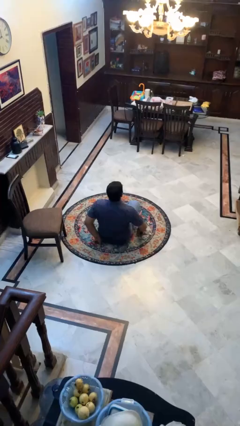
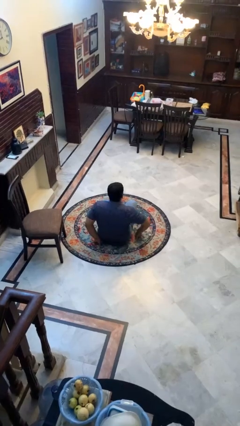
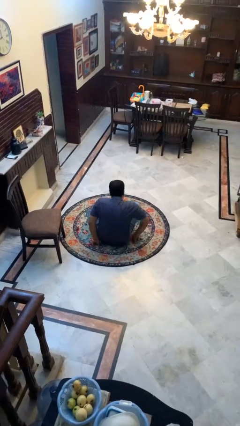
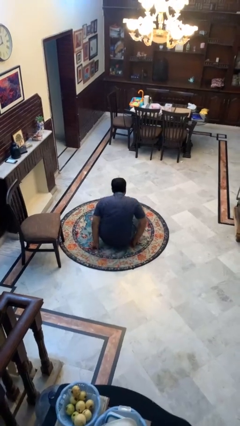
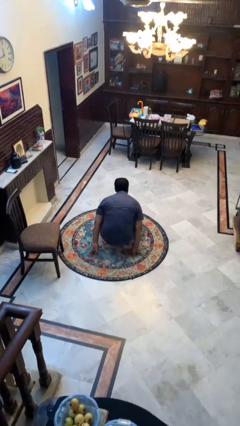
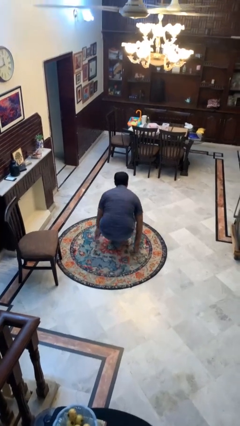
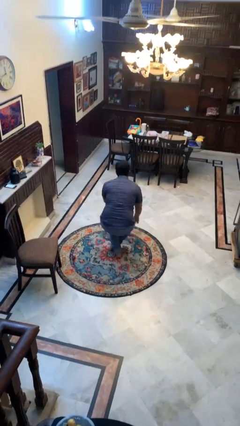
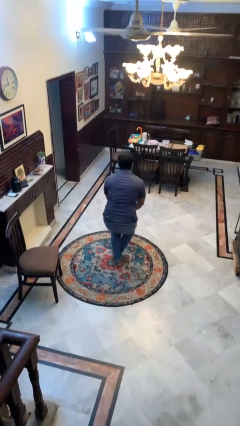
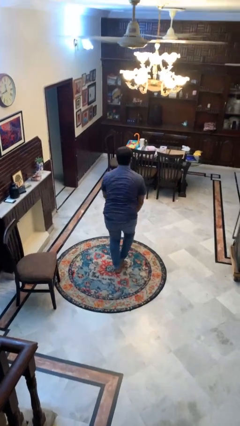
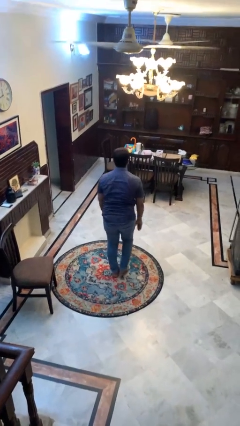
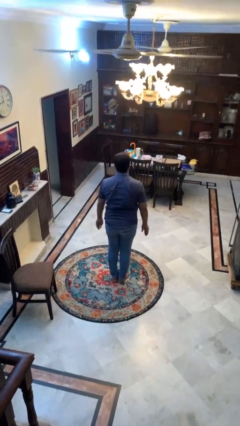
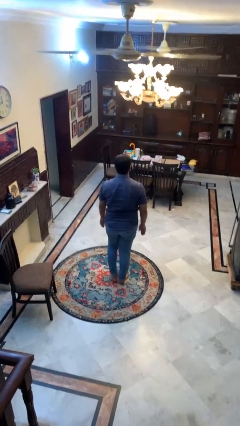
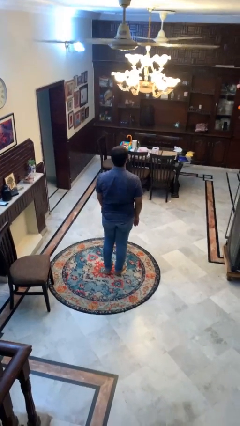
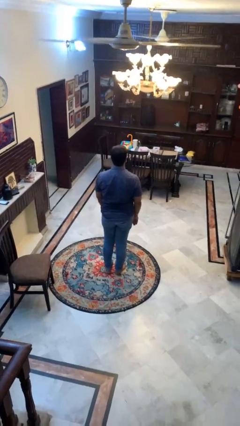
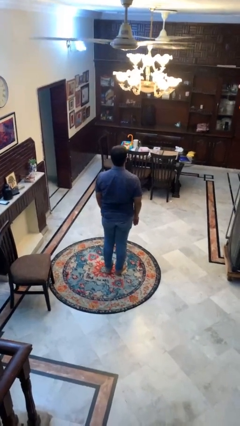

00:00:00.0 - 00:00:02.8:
person stands up from floor

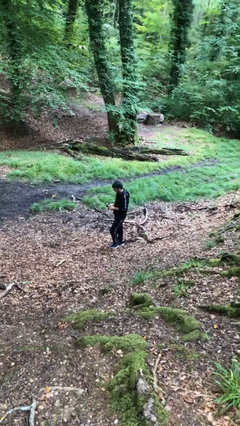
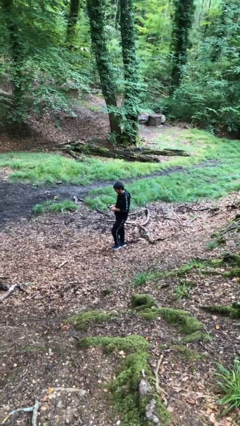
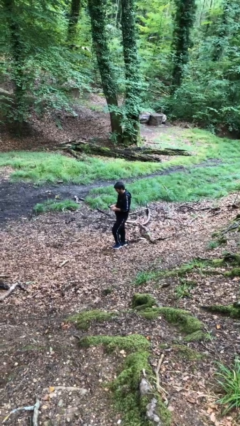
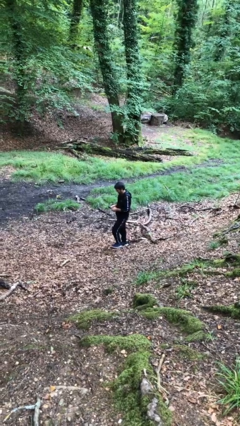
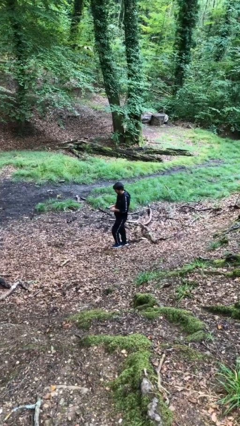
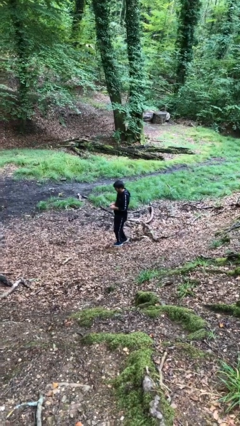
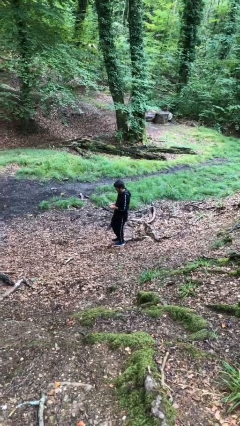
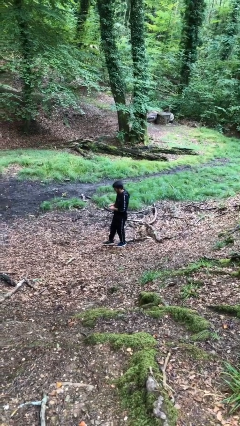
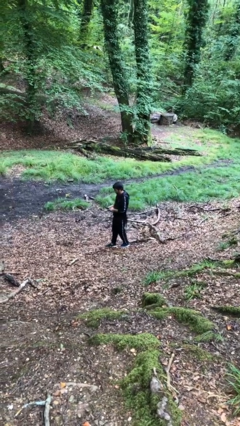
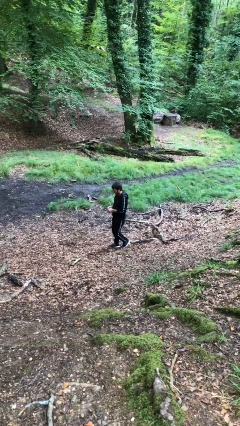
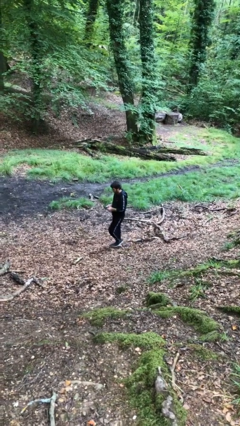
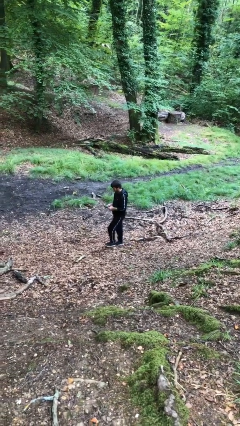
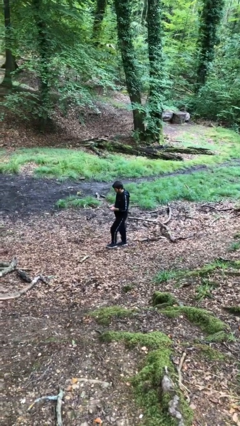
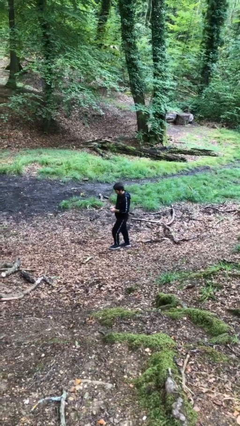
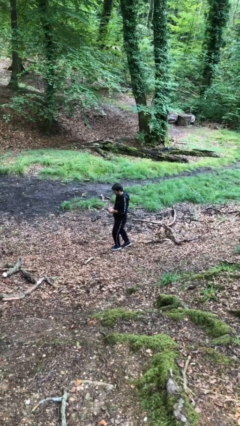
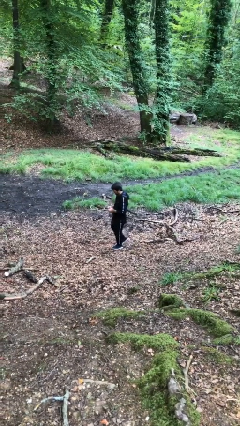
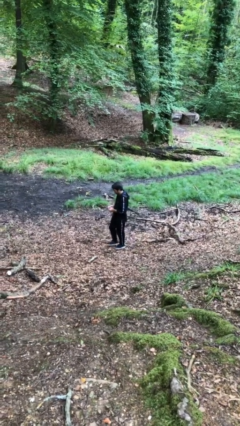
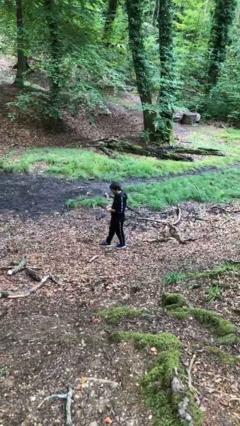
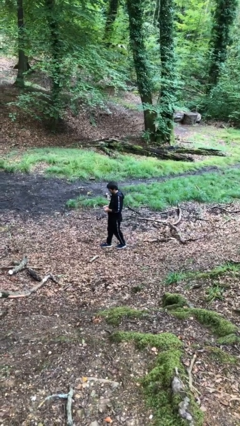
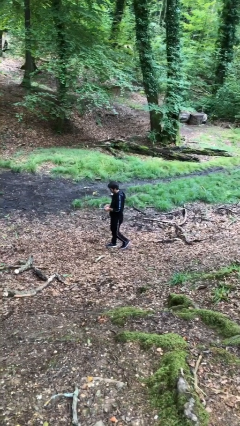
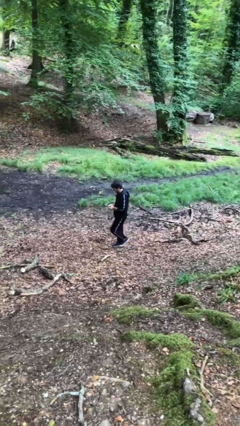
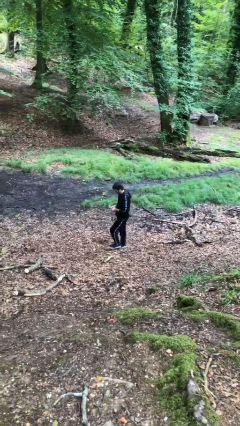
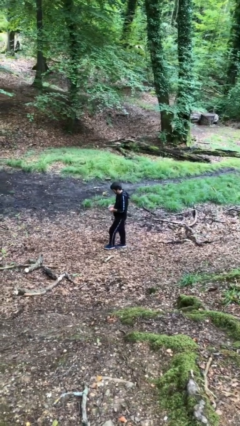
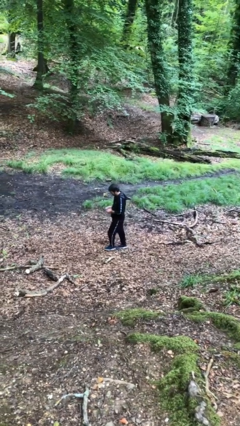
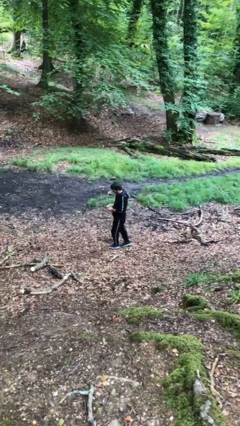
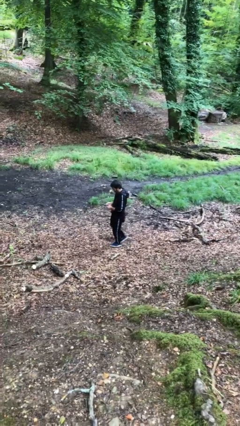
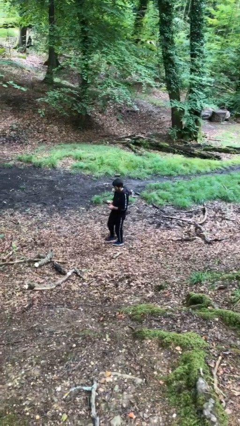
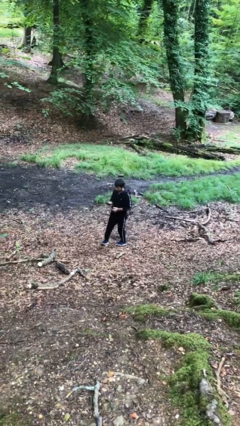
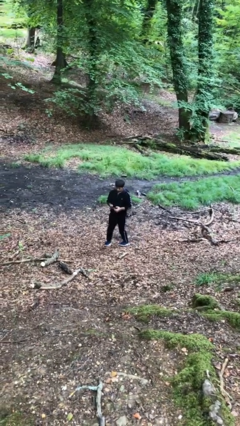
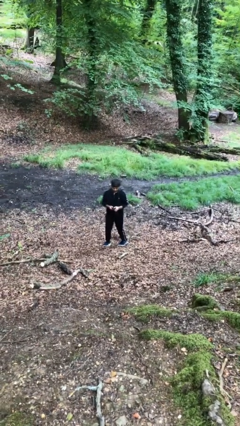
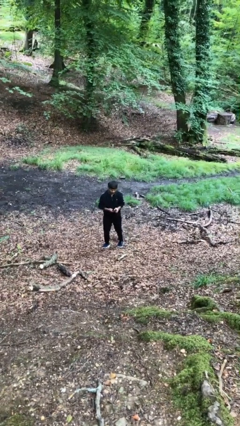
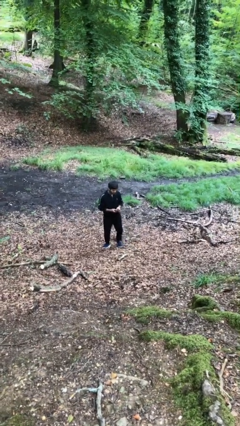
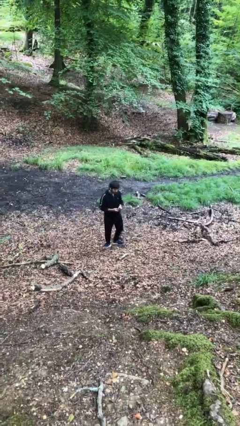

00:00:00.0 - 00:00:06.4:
person texts on phone

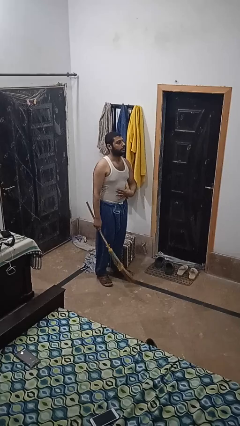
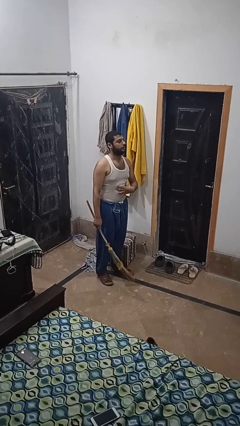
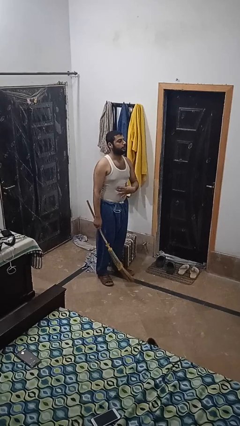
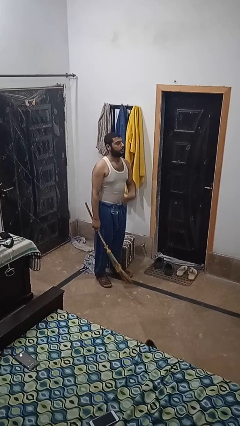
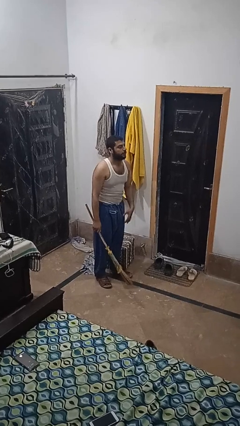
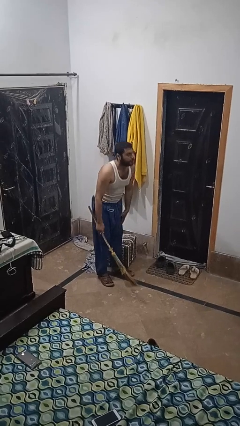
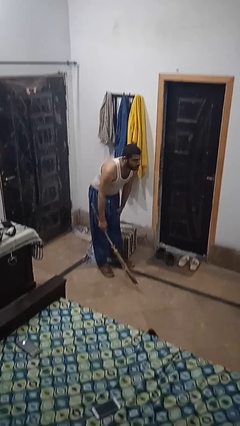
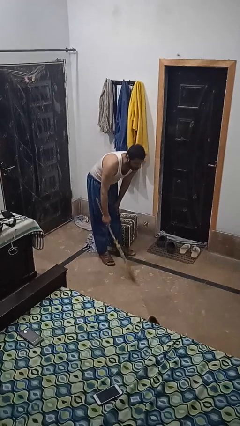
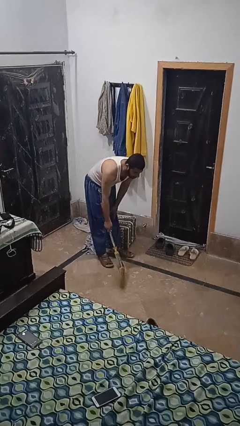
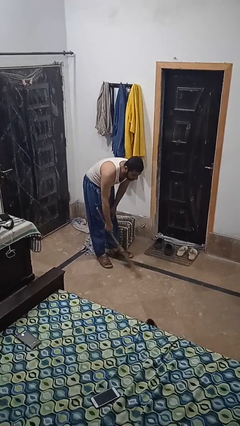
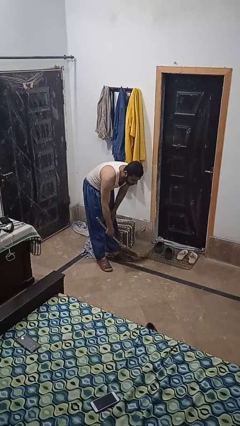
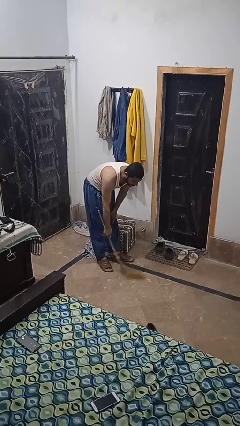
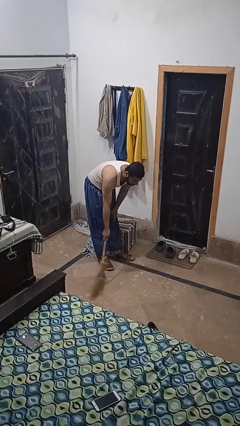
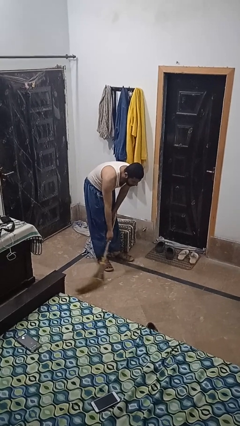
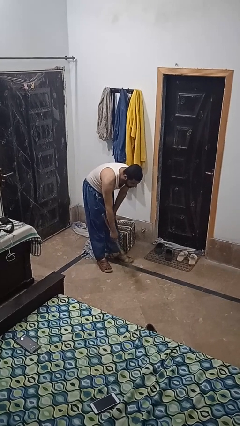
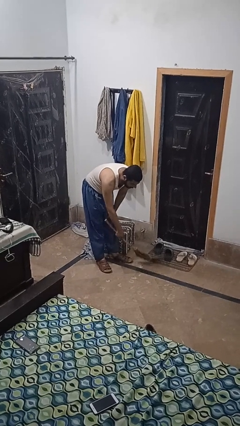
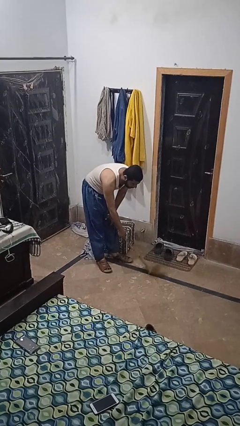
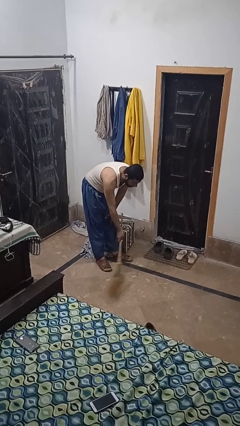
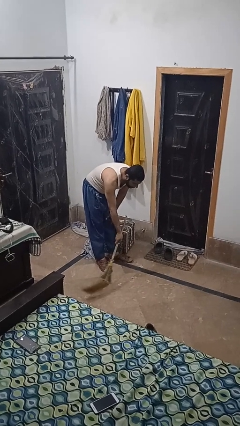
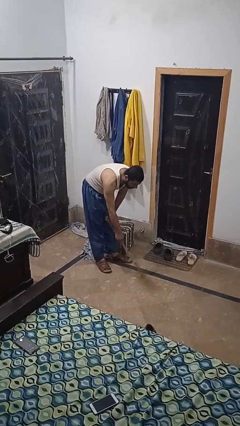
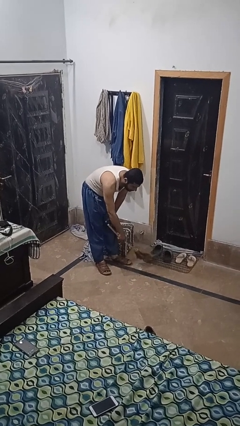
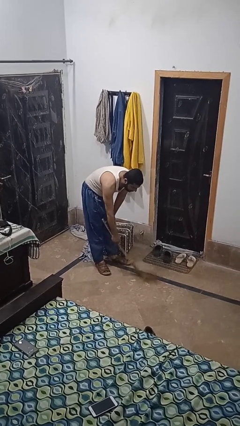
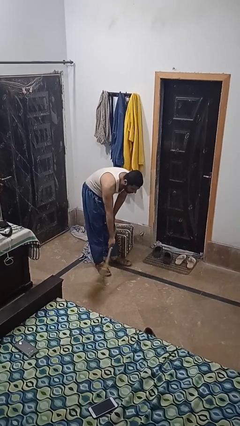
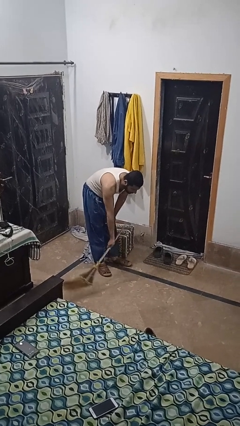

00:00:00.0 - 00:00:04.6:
person sweeps floor

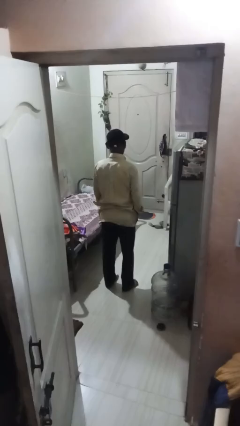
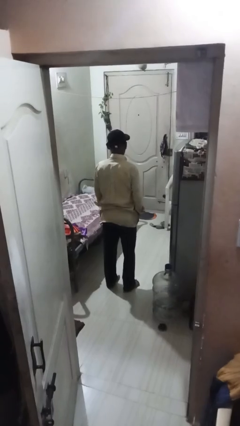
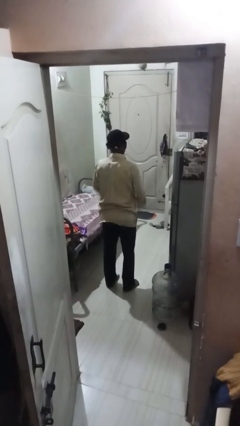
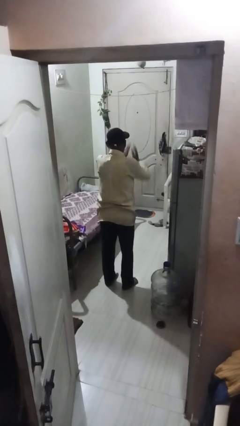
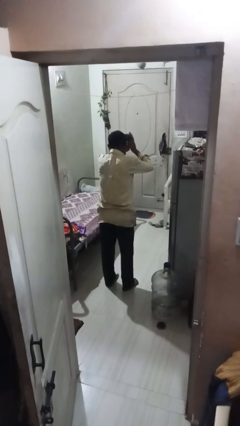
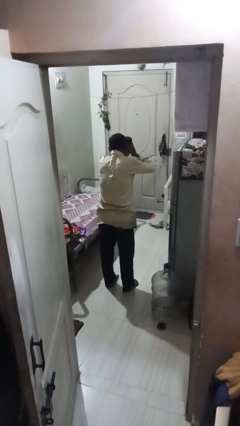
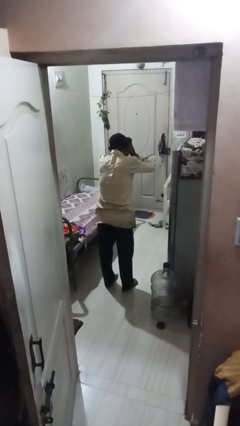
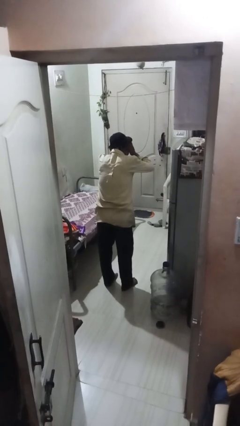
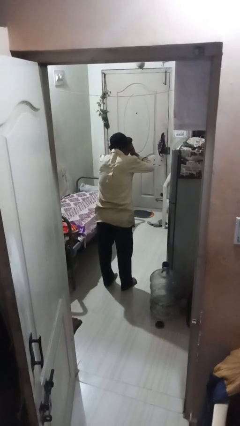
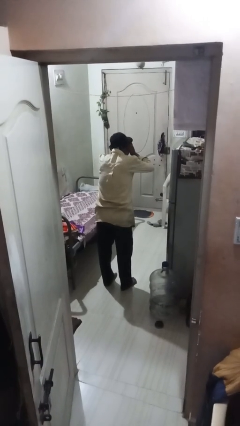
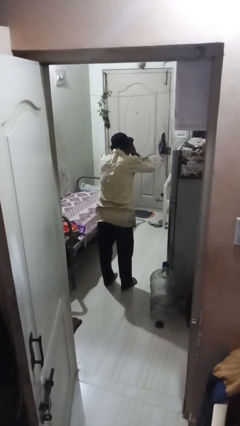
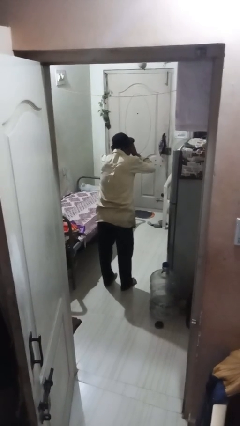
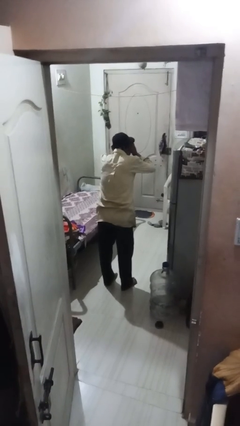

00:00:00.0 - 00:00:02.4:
person prays

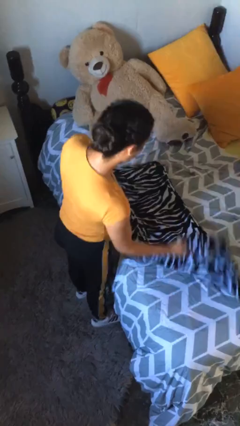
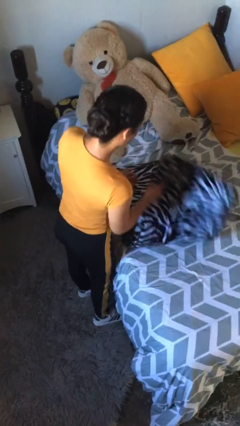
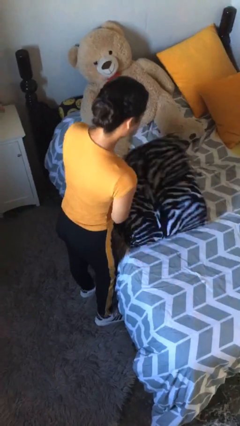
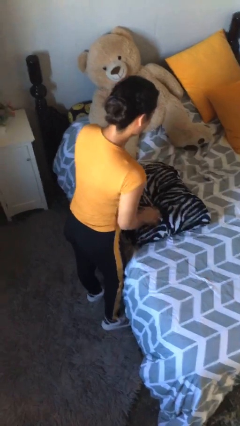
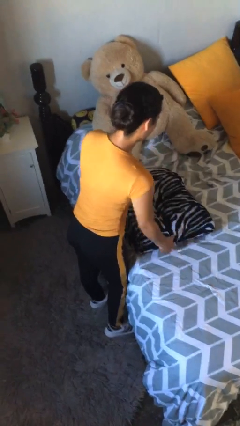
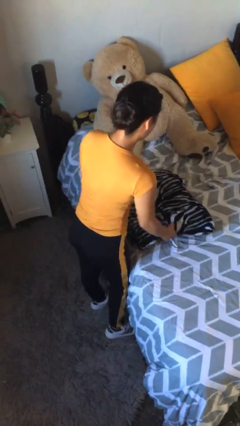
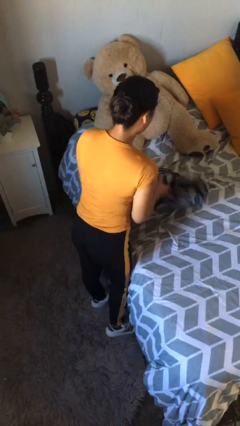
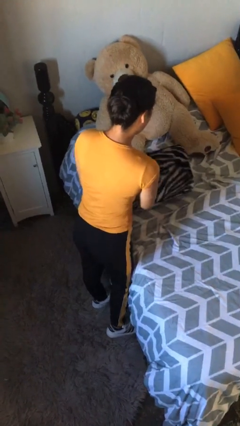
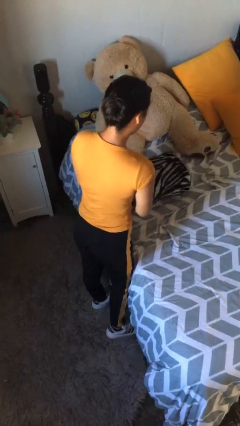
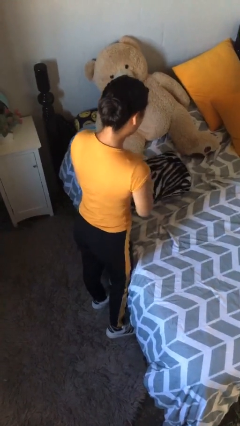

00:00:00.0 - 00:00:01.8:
person folds blanket
